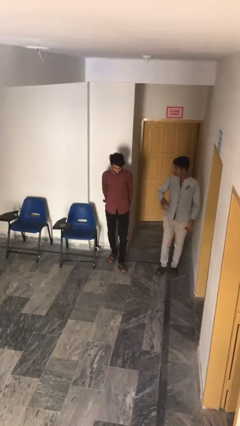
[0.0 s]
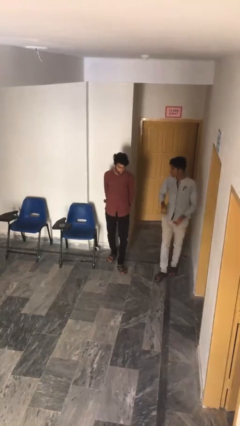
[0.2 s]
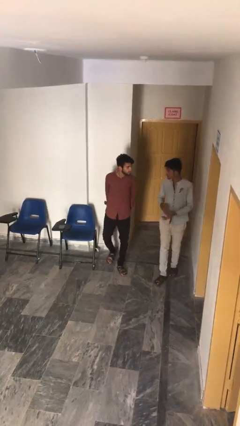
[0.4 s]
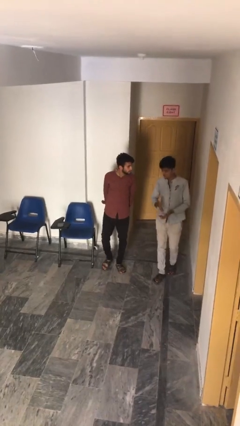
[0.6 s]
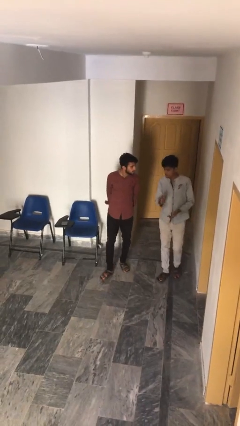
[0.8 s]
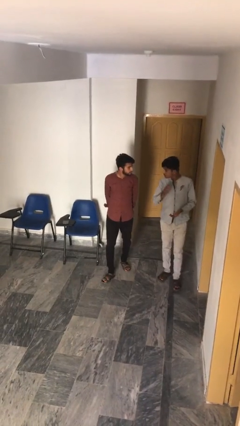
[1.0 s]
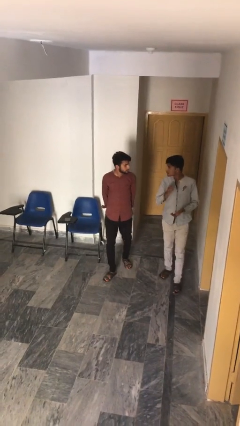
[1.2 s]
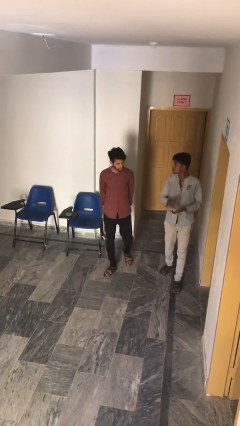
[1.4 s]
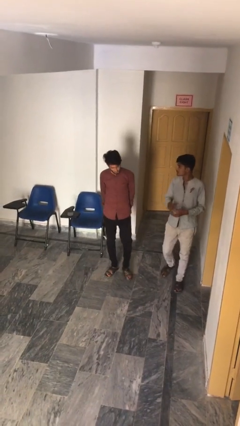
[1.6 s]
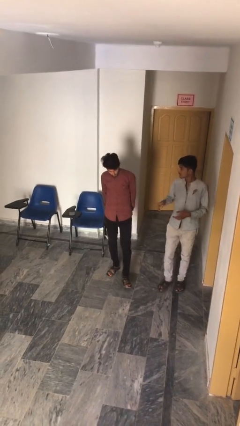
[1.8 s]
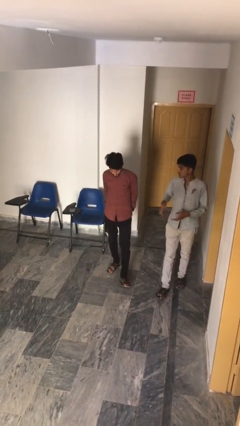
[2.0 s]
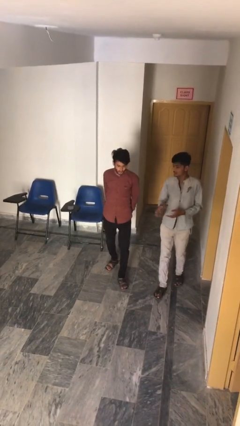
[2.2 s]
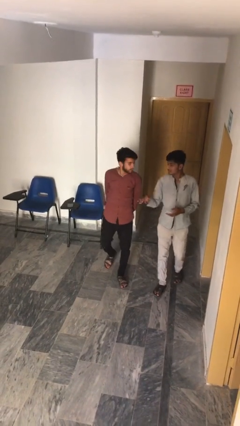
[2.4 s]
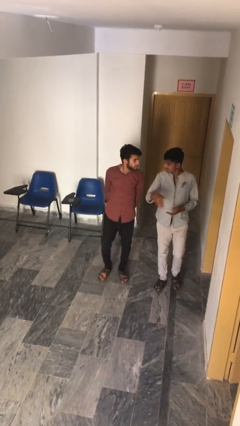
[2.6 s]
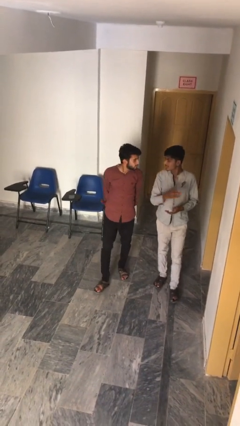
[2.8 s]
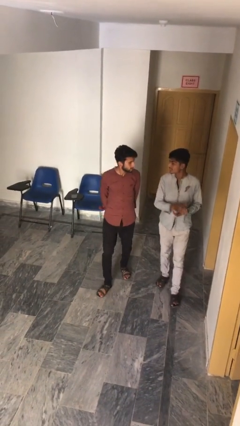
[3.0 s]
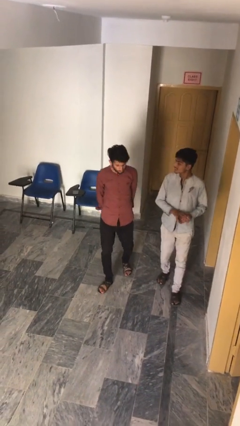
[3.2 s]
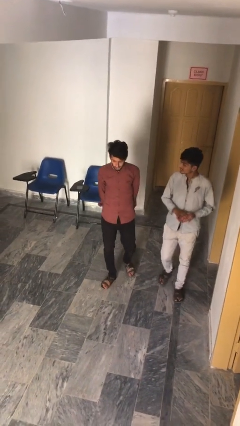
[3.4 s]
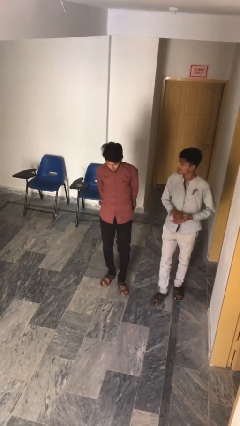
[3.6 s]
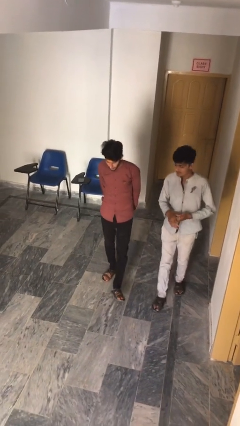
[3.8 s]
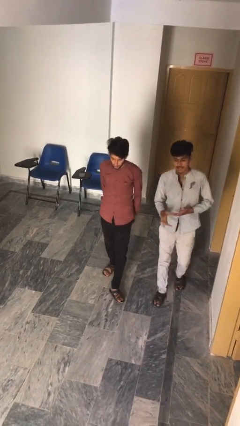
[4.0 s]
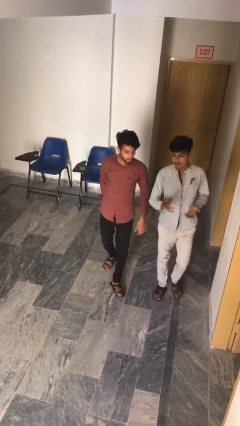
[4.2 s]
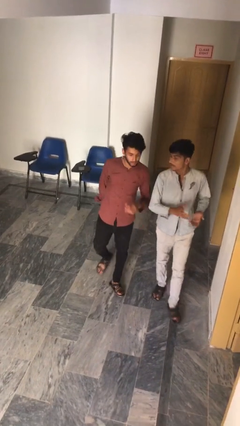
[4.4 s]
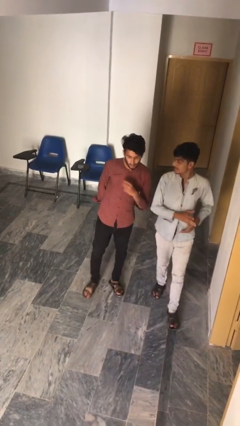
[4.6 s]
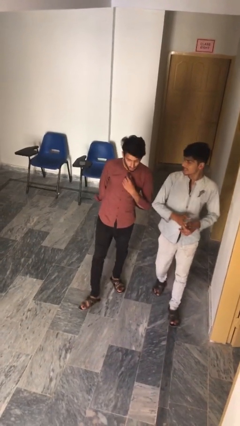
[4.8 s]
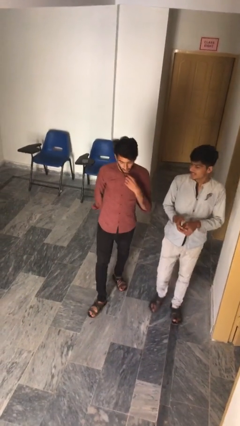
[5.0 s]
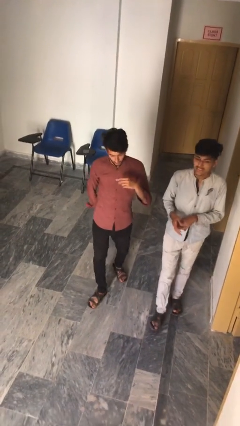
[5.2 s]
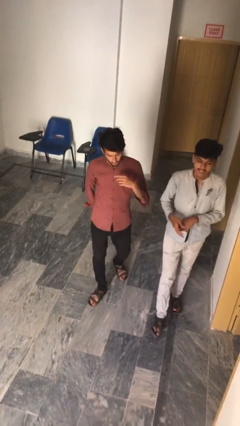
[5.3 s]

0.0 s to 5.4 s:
person talks to person

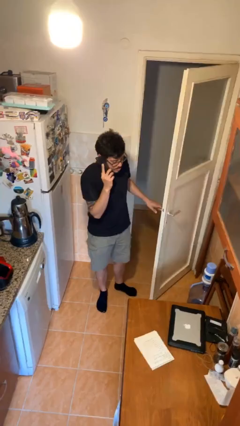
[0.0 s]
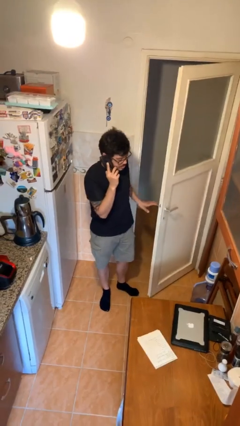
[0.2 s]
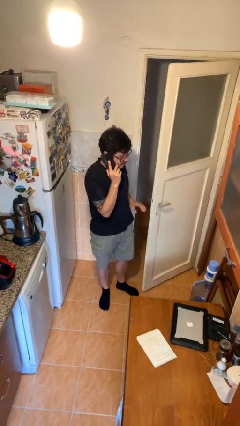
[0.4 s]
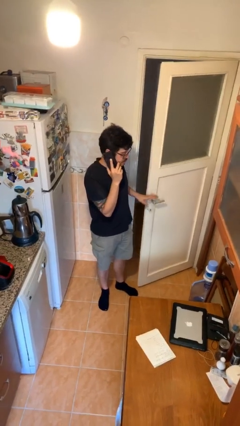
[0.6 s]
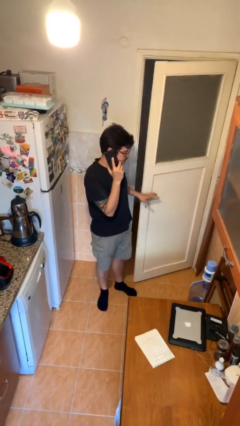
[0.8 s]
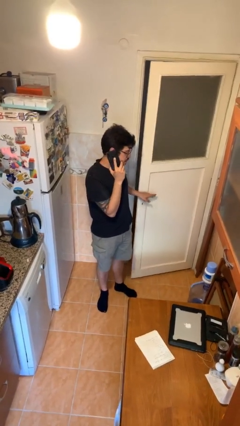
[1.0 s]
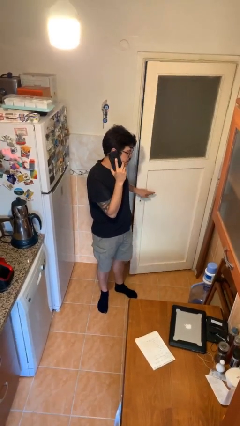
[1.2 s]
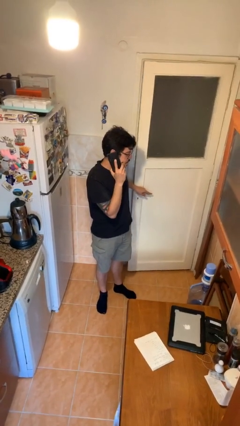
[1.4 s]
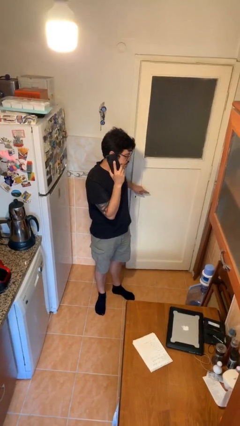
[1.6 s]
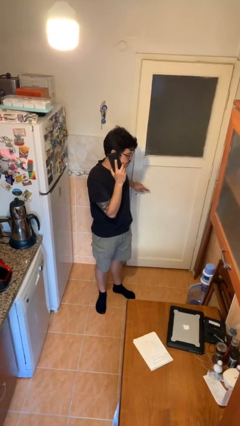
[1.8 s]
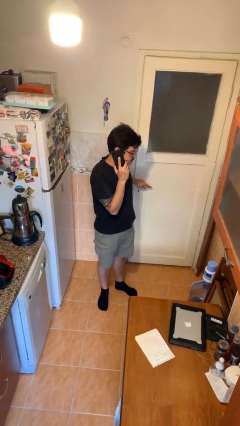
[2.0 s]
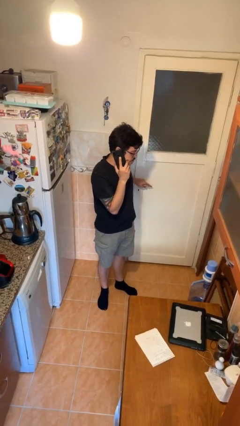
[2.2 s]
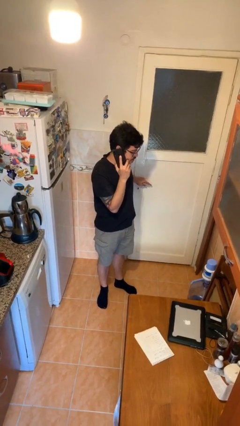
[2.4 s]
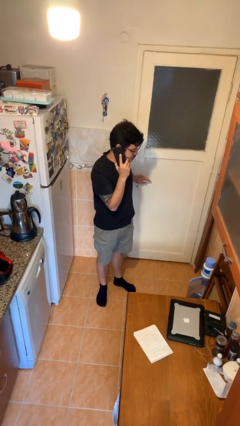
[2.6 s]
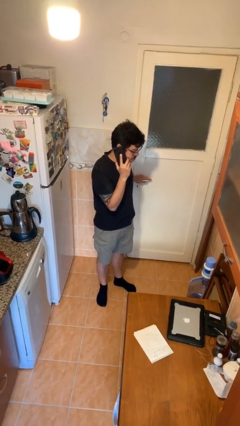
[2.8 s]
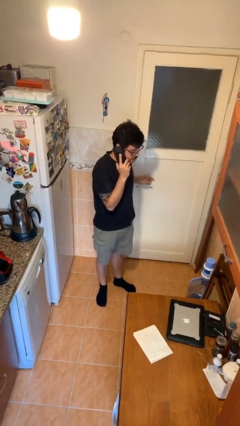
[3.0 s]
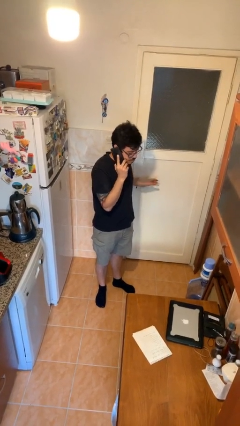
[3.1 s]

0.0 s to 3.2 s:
person closes facility door

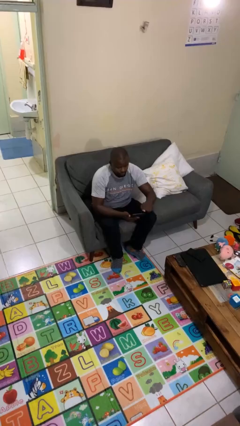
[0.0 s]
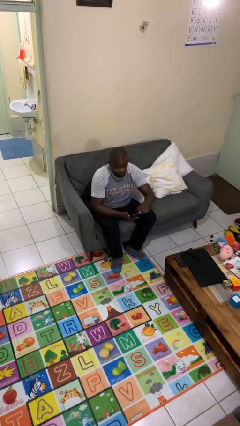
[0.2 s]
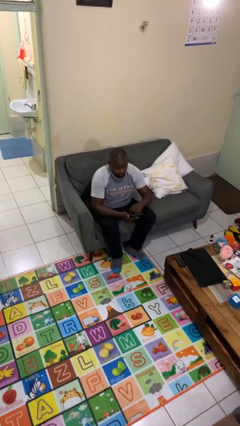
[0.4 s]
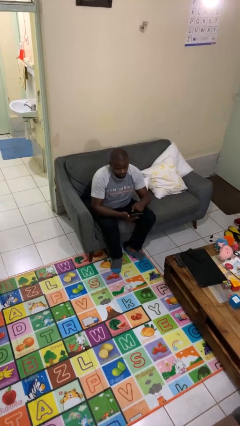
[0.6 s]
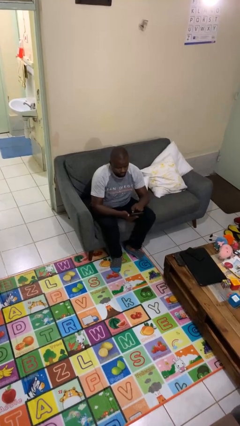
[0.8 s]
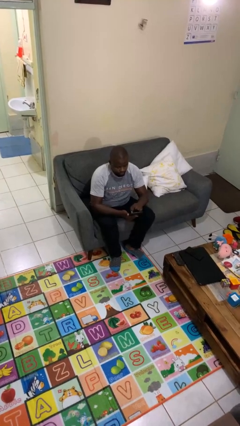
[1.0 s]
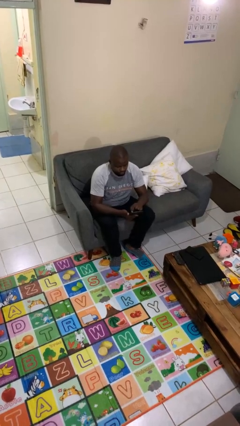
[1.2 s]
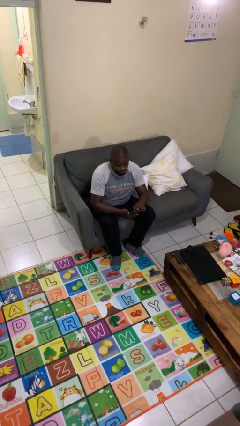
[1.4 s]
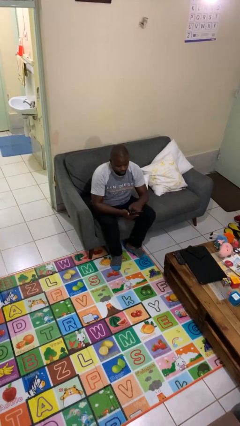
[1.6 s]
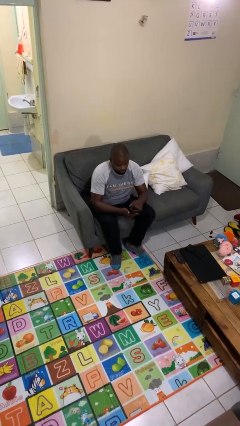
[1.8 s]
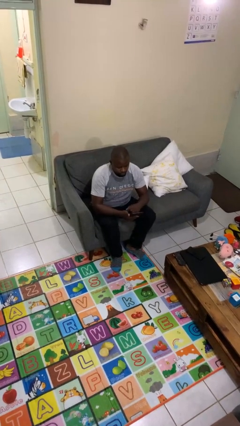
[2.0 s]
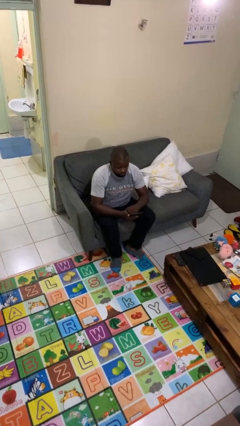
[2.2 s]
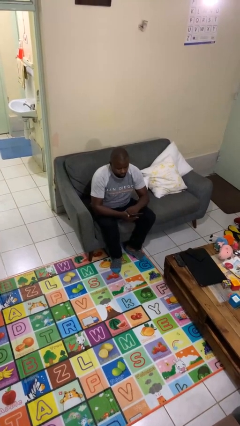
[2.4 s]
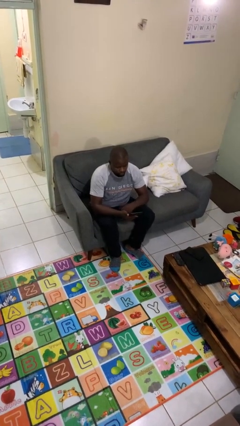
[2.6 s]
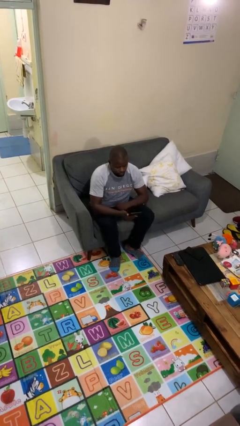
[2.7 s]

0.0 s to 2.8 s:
person interacts with tablet

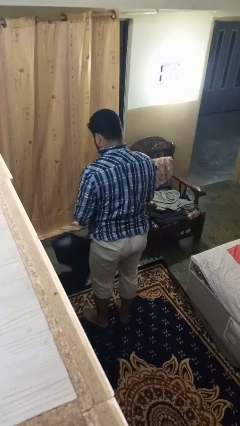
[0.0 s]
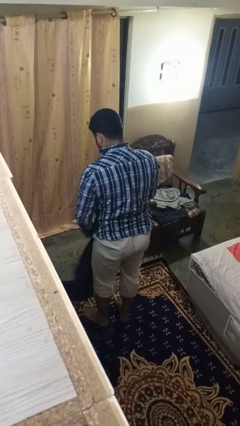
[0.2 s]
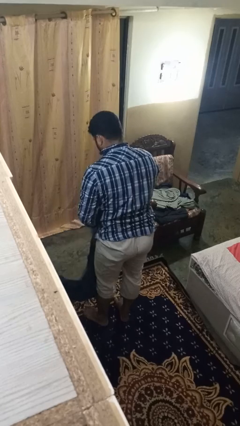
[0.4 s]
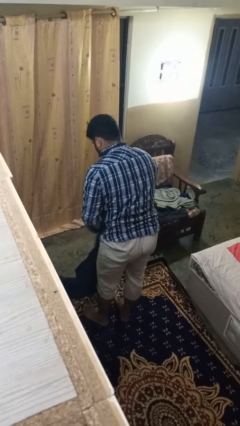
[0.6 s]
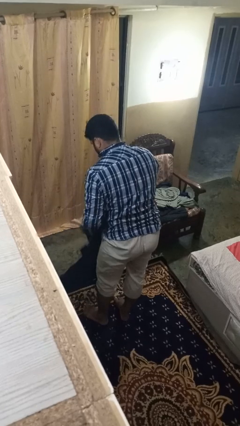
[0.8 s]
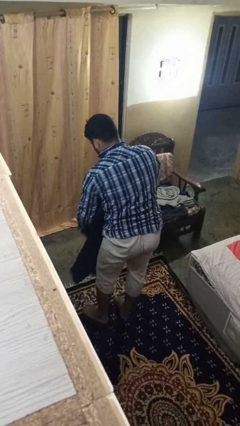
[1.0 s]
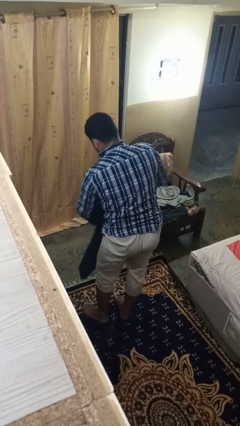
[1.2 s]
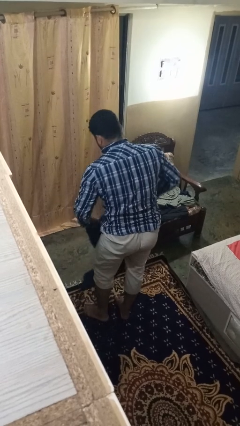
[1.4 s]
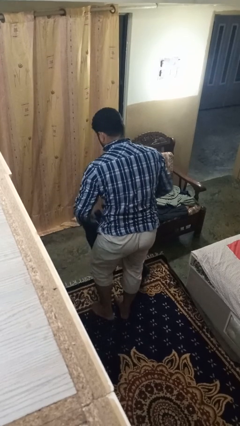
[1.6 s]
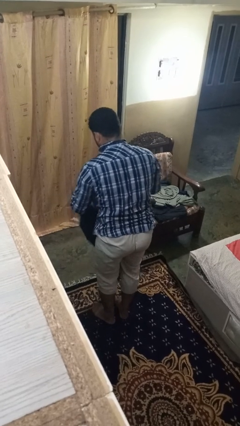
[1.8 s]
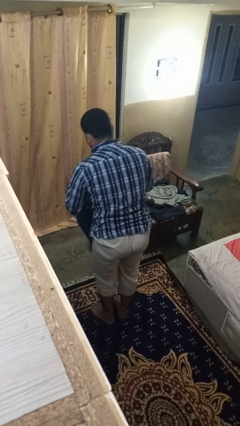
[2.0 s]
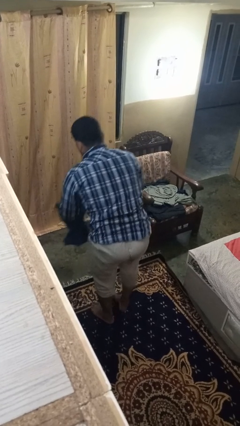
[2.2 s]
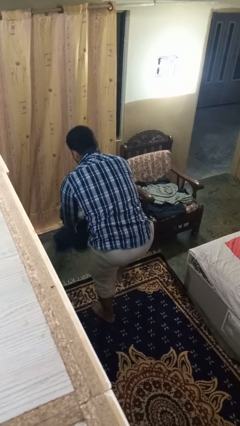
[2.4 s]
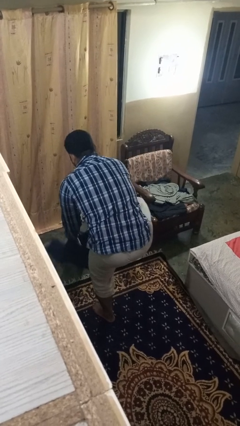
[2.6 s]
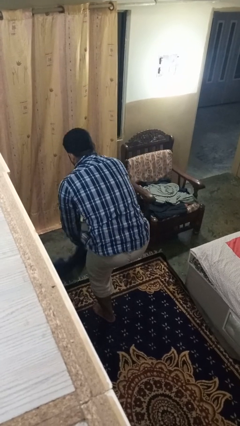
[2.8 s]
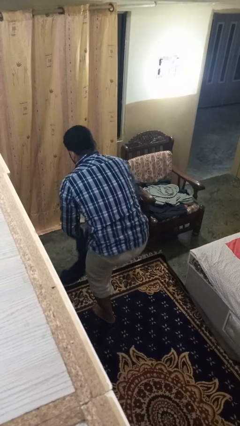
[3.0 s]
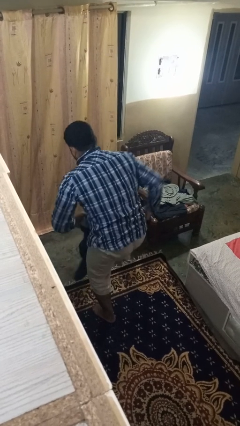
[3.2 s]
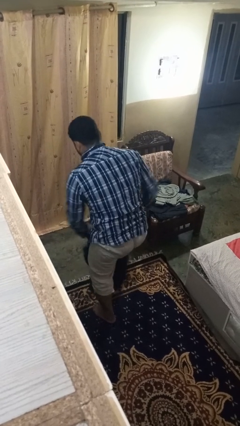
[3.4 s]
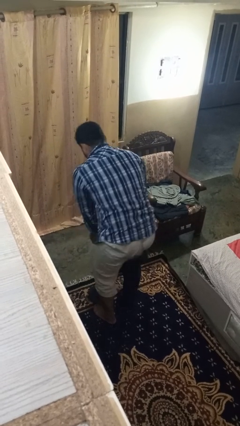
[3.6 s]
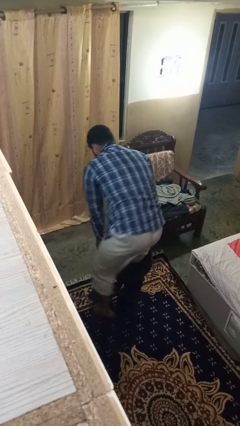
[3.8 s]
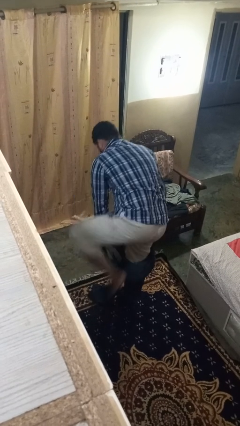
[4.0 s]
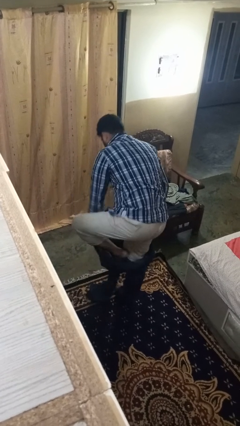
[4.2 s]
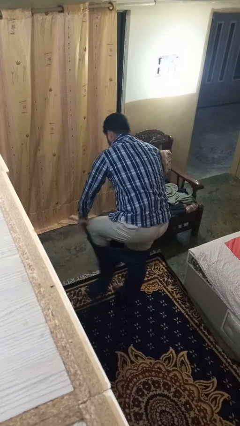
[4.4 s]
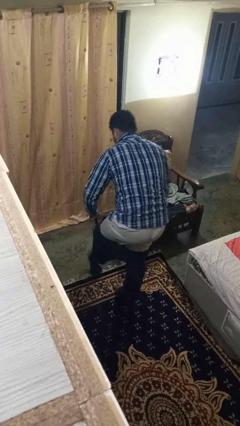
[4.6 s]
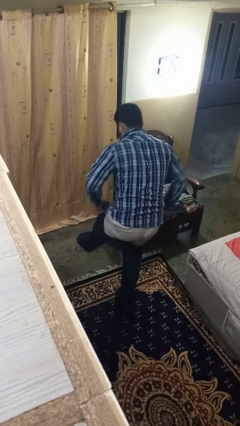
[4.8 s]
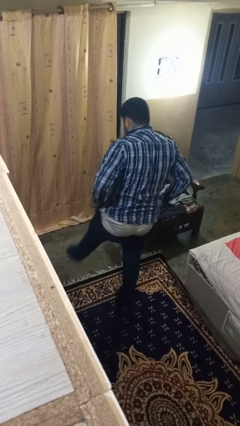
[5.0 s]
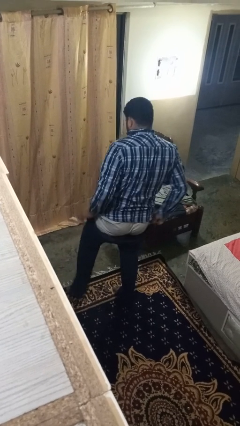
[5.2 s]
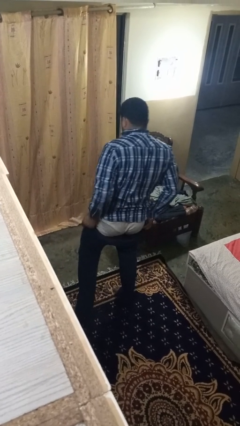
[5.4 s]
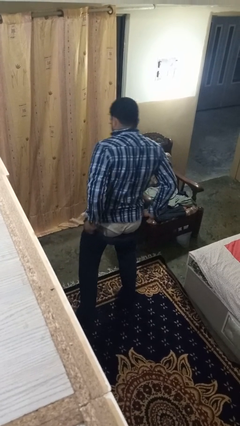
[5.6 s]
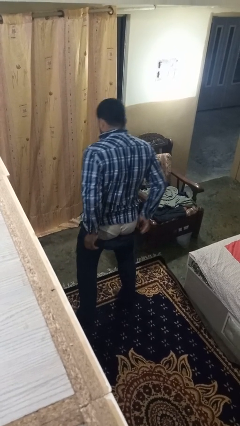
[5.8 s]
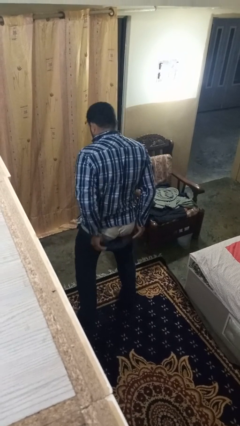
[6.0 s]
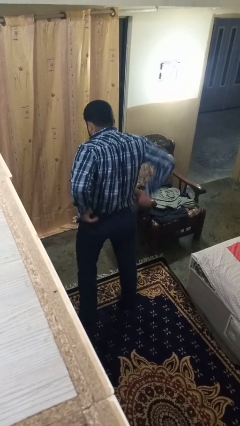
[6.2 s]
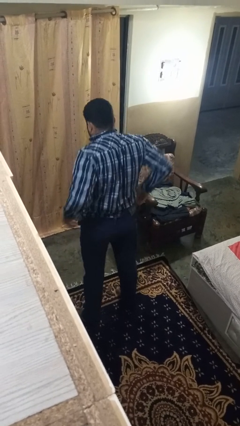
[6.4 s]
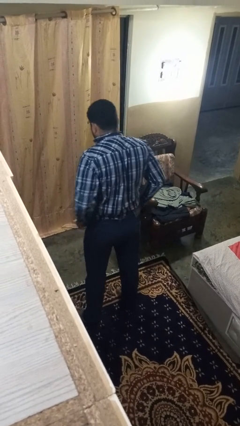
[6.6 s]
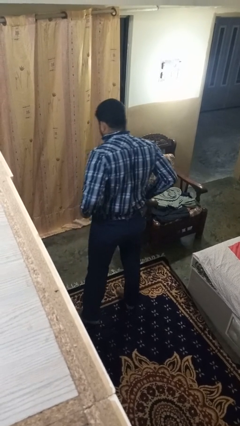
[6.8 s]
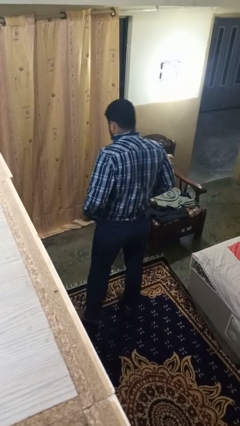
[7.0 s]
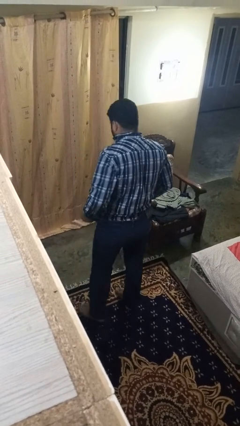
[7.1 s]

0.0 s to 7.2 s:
person puts on pants
